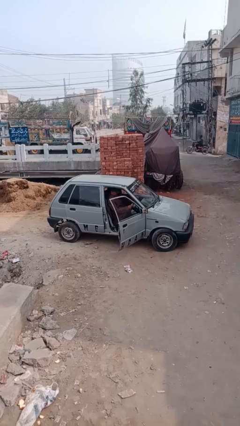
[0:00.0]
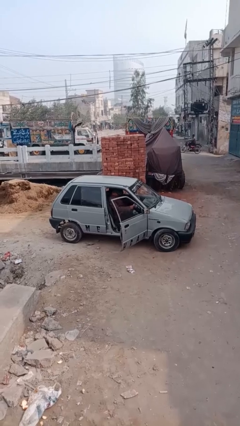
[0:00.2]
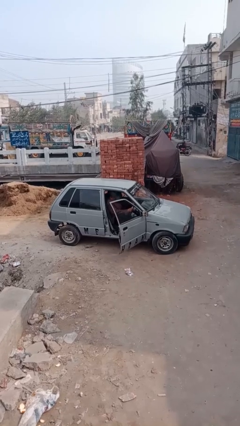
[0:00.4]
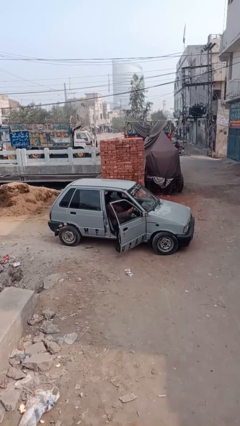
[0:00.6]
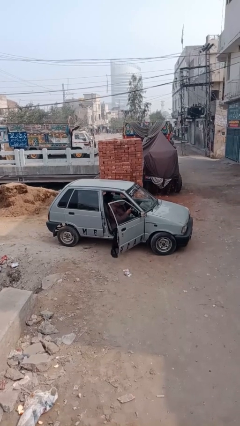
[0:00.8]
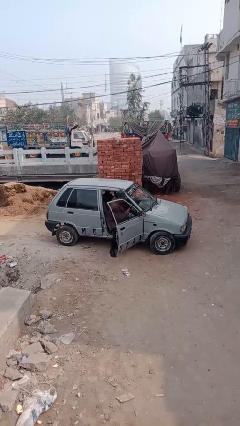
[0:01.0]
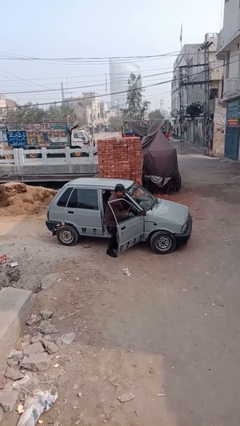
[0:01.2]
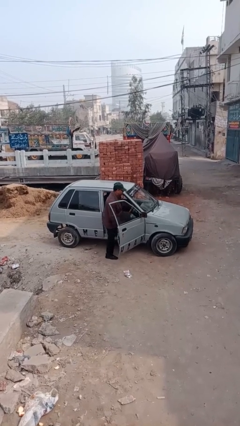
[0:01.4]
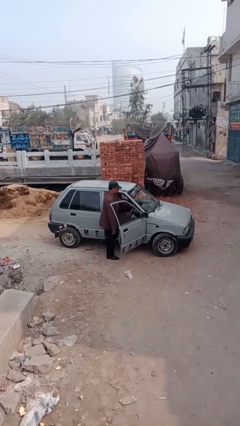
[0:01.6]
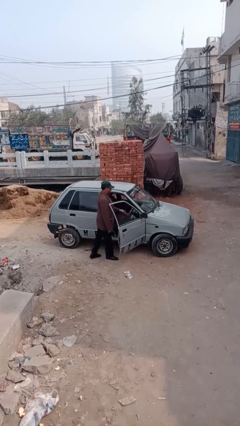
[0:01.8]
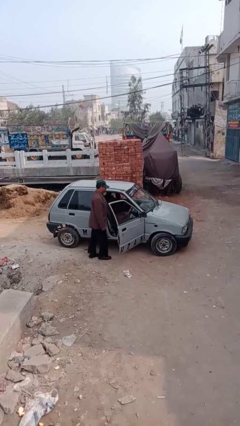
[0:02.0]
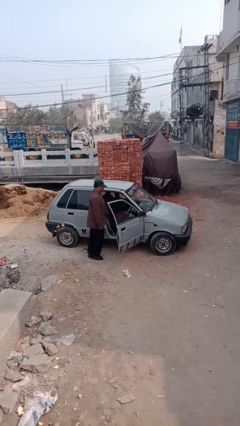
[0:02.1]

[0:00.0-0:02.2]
person exits car

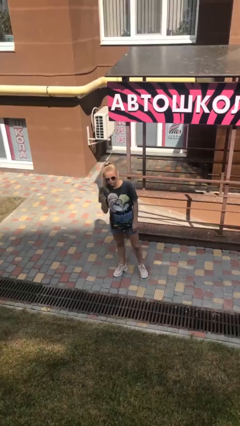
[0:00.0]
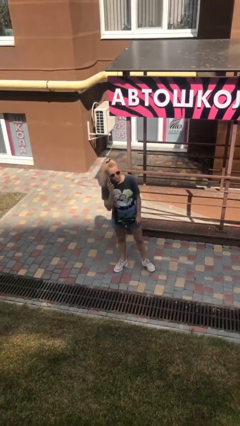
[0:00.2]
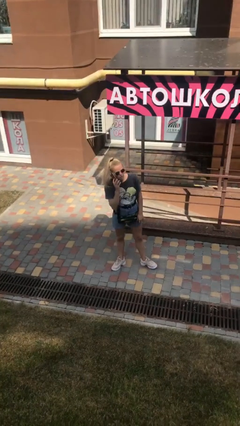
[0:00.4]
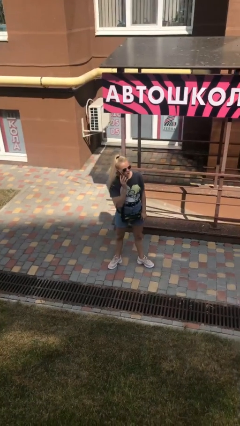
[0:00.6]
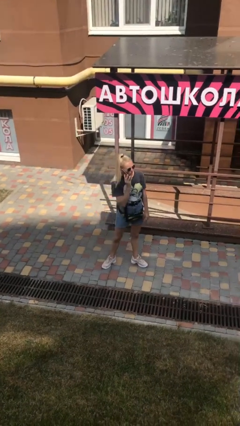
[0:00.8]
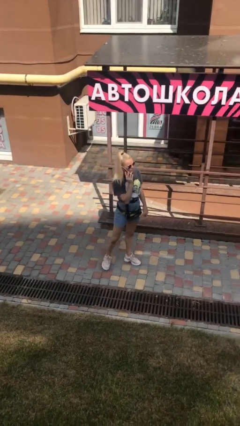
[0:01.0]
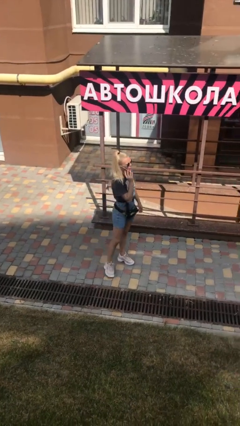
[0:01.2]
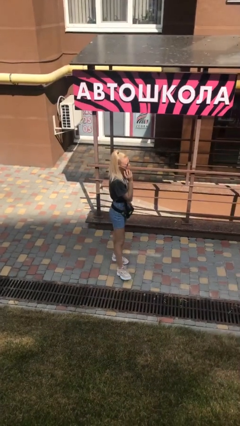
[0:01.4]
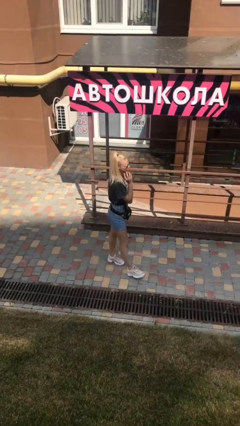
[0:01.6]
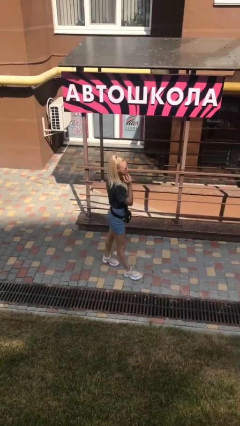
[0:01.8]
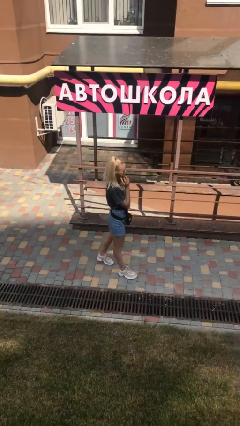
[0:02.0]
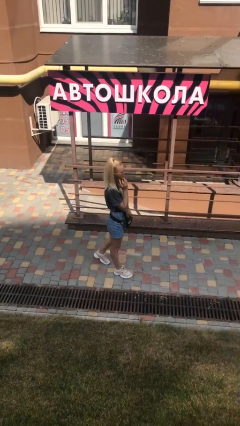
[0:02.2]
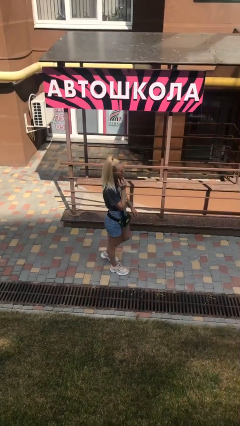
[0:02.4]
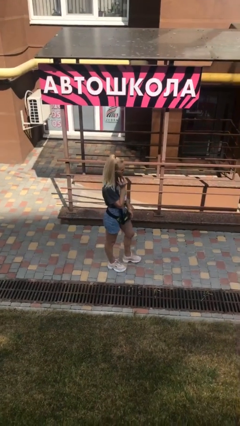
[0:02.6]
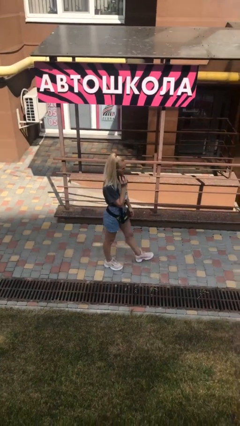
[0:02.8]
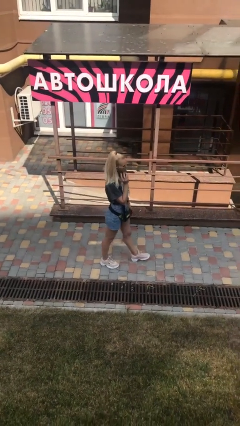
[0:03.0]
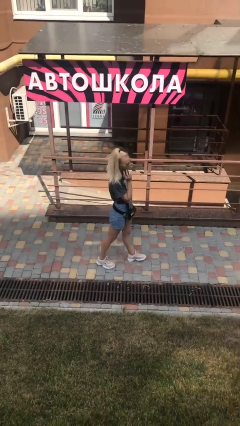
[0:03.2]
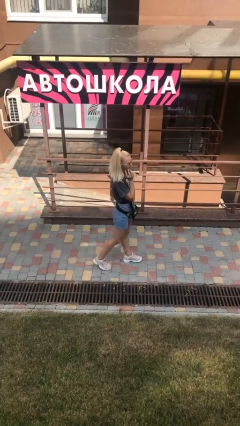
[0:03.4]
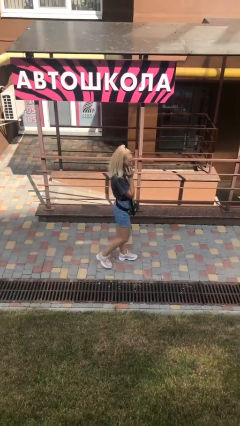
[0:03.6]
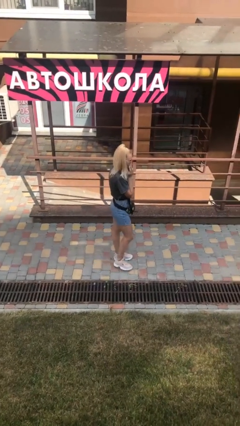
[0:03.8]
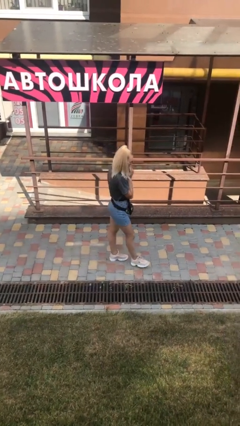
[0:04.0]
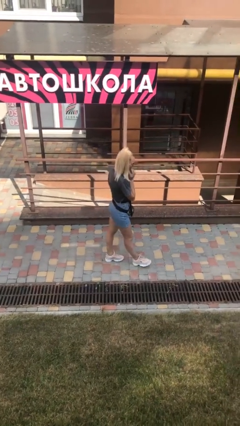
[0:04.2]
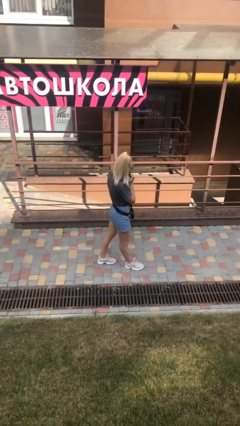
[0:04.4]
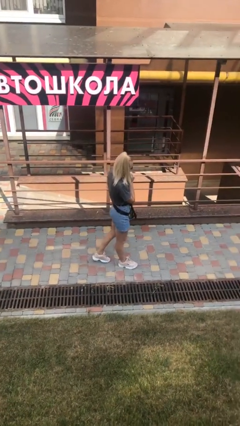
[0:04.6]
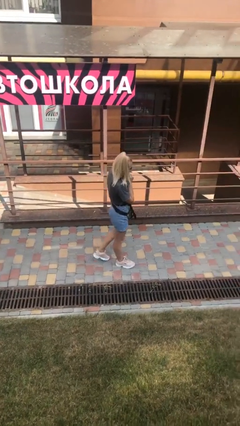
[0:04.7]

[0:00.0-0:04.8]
person talks on phone

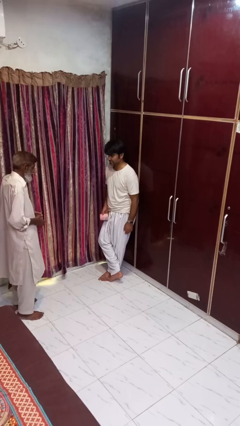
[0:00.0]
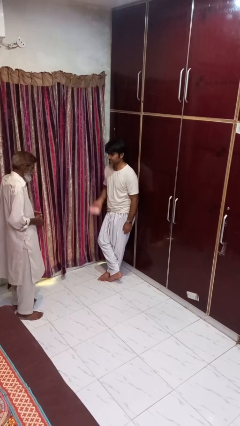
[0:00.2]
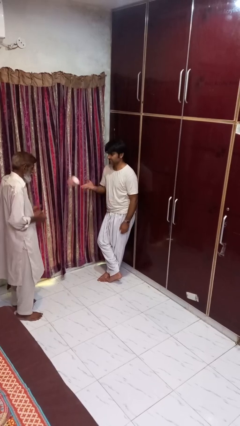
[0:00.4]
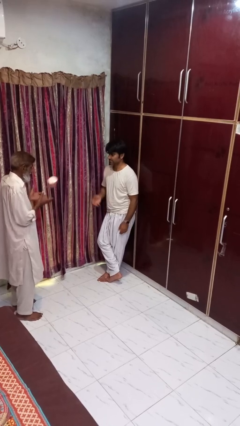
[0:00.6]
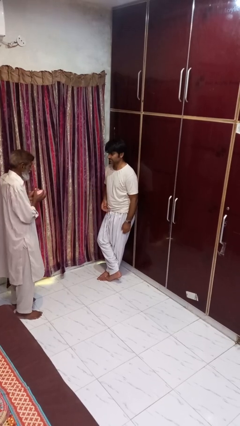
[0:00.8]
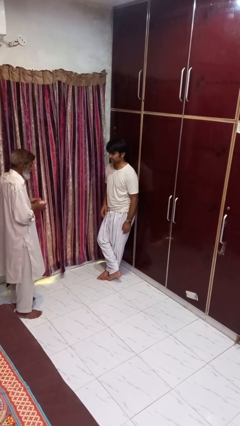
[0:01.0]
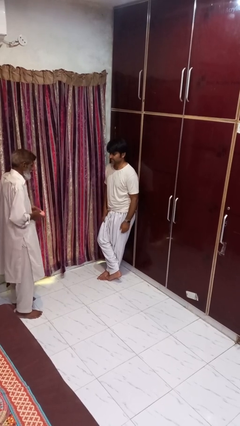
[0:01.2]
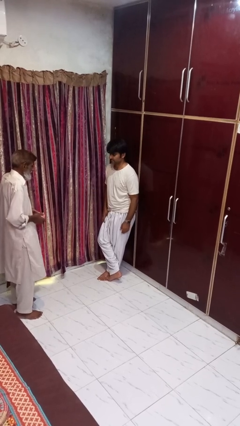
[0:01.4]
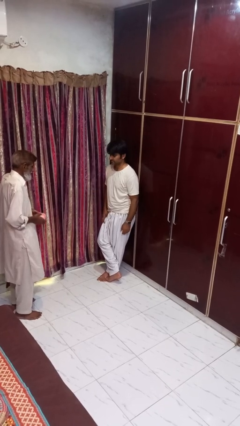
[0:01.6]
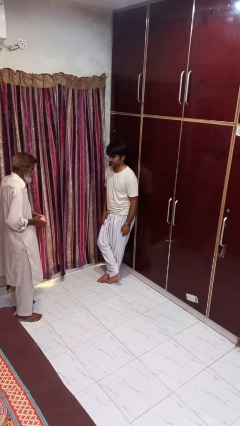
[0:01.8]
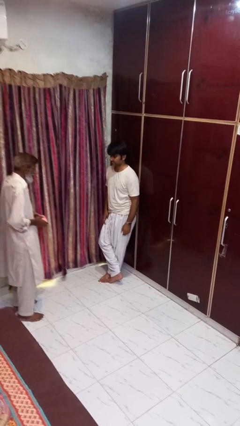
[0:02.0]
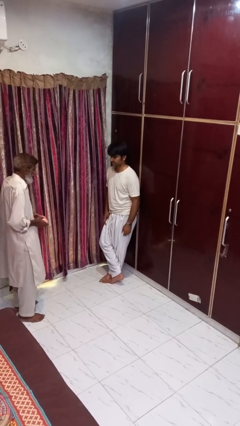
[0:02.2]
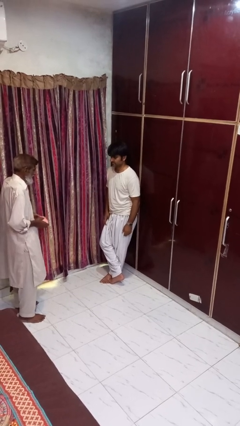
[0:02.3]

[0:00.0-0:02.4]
person throws object to person

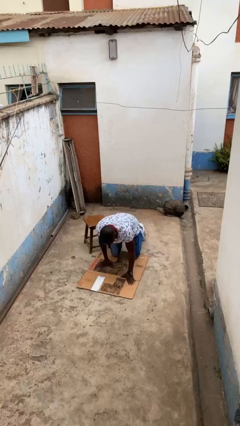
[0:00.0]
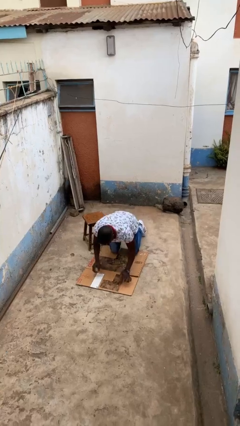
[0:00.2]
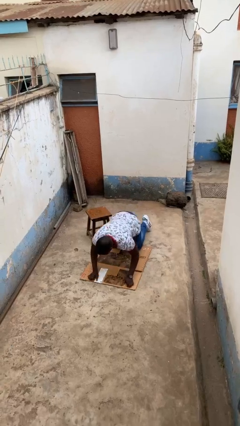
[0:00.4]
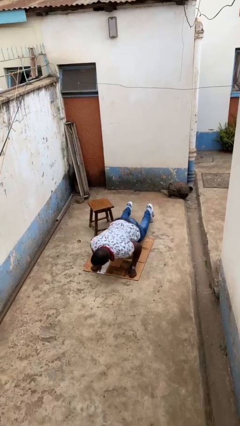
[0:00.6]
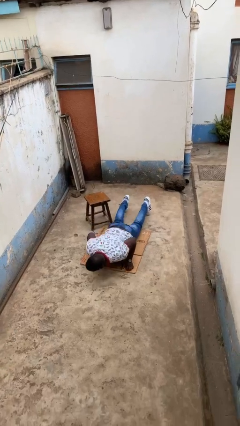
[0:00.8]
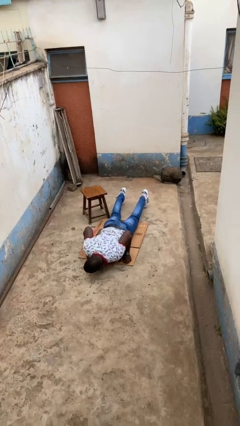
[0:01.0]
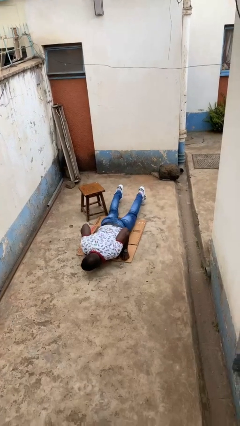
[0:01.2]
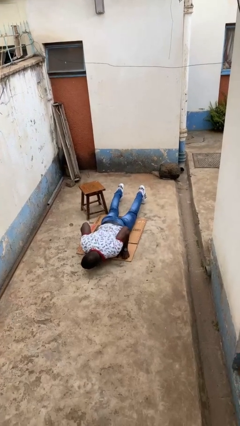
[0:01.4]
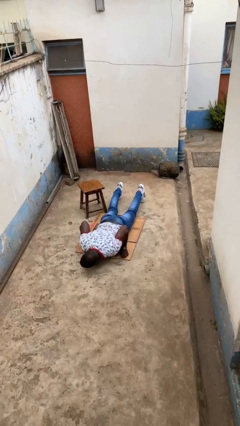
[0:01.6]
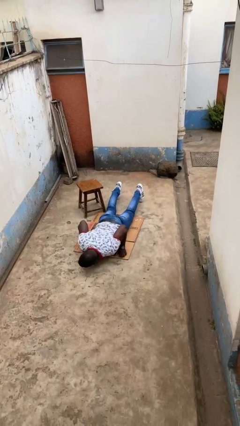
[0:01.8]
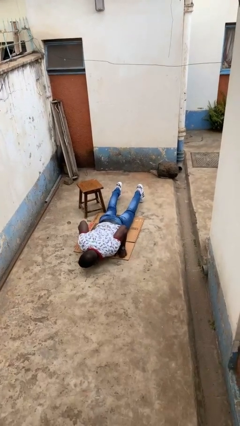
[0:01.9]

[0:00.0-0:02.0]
person lies down on floor

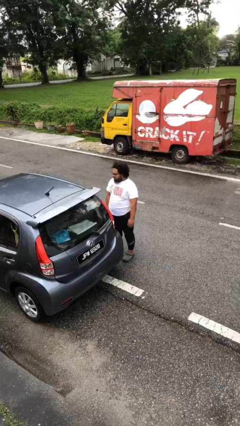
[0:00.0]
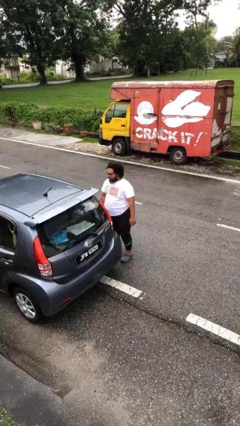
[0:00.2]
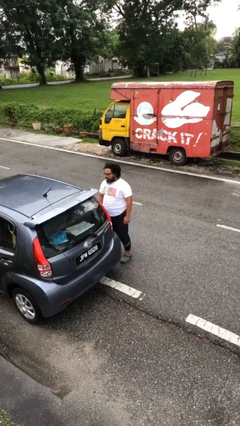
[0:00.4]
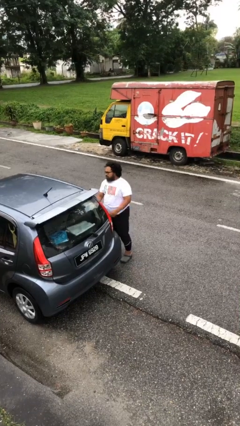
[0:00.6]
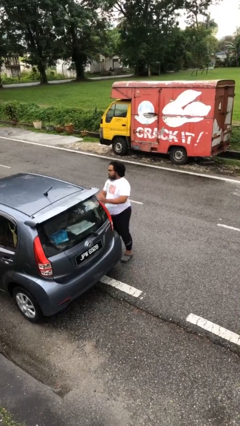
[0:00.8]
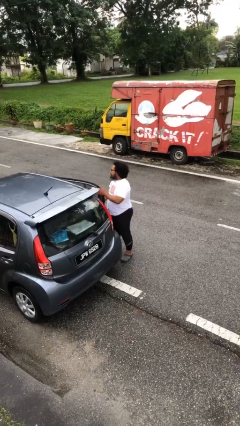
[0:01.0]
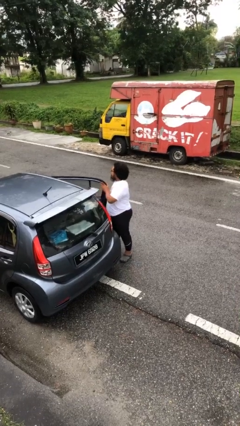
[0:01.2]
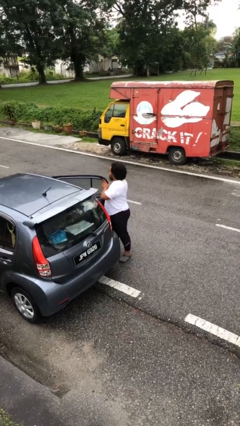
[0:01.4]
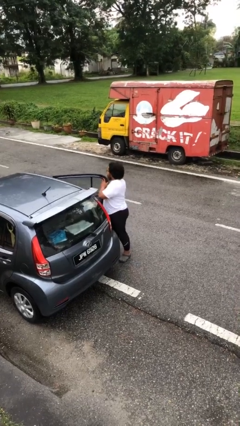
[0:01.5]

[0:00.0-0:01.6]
person opens car door

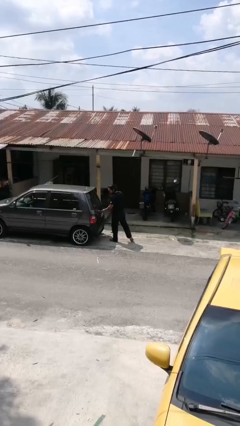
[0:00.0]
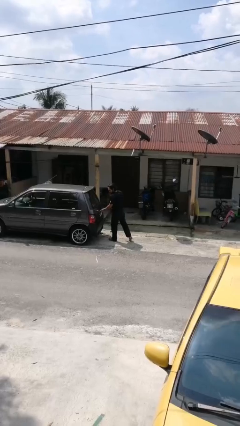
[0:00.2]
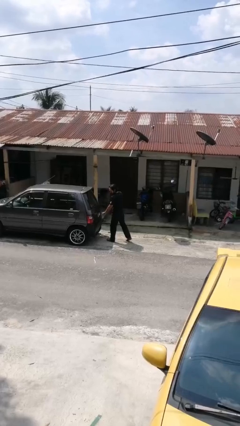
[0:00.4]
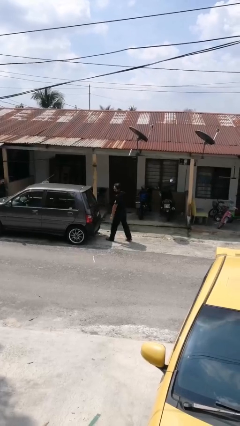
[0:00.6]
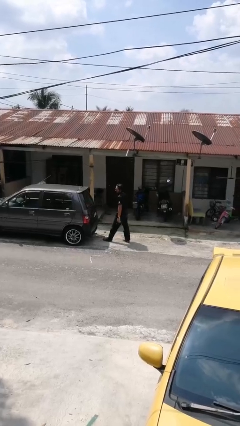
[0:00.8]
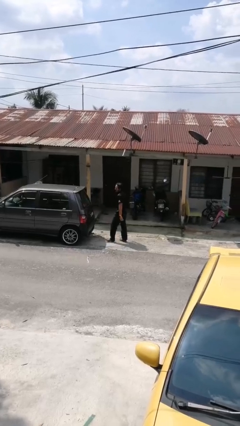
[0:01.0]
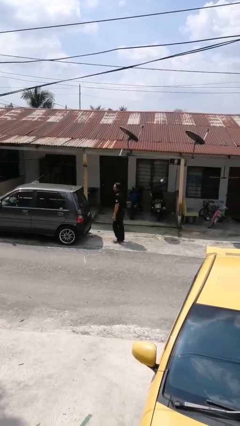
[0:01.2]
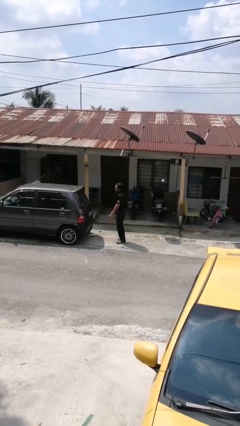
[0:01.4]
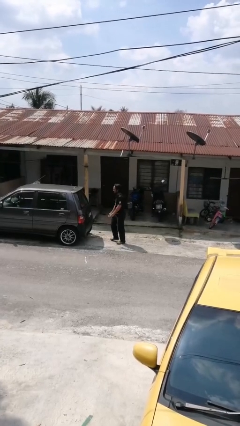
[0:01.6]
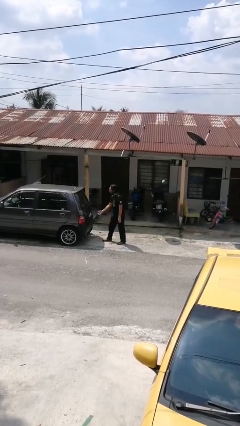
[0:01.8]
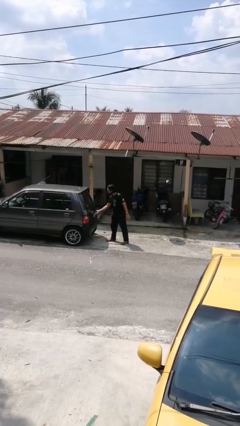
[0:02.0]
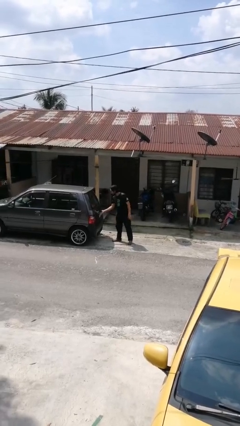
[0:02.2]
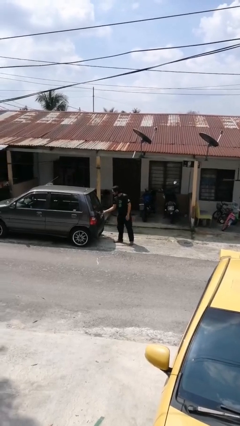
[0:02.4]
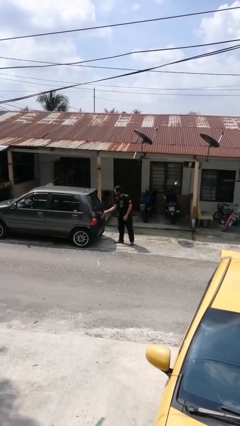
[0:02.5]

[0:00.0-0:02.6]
person opens car trunk

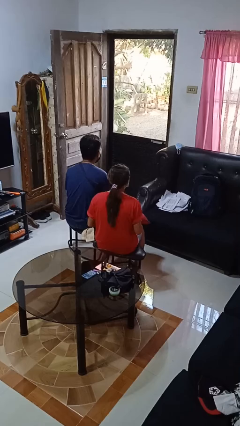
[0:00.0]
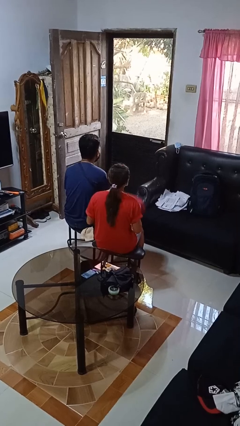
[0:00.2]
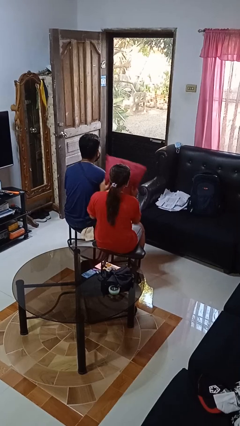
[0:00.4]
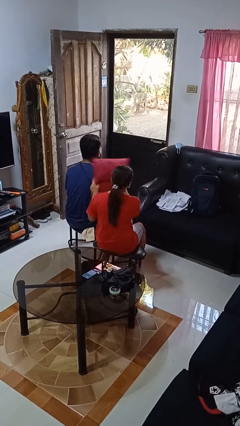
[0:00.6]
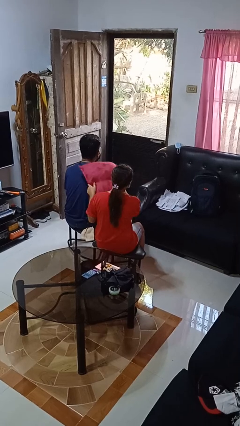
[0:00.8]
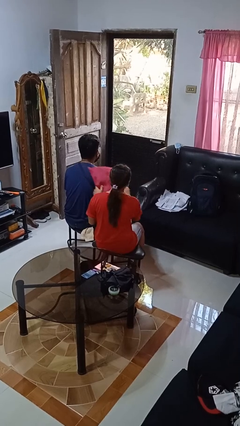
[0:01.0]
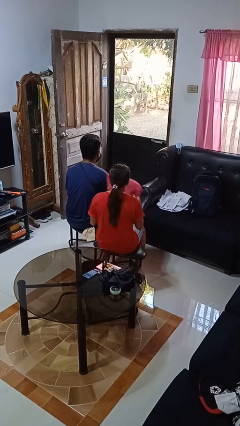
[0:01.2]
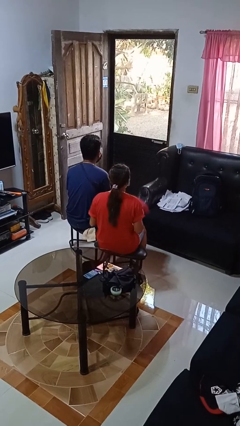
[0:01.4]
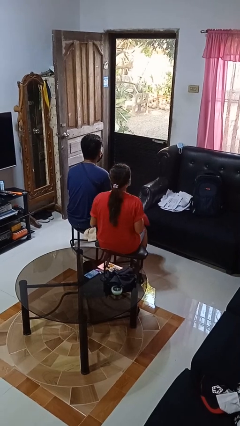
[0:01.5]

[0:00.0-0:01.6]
person hits person with pillow
